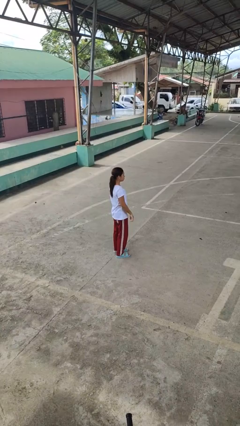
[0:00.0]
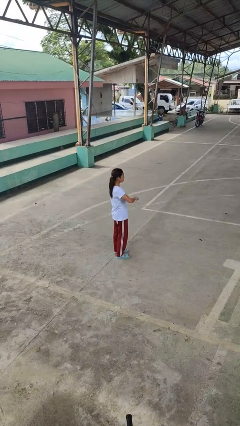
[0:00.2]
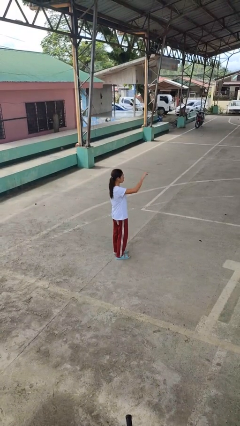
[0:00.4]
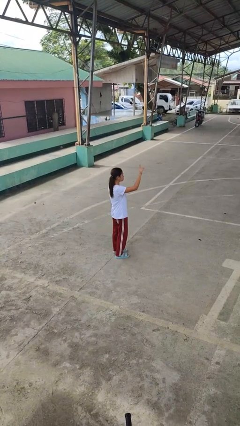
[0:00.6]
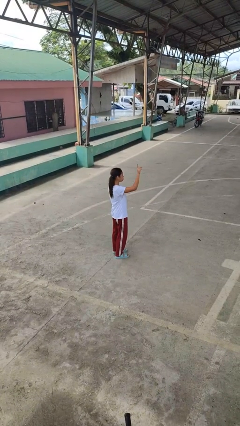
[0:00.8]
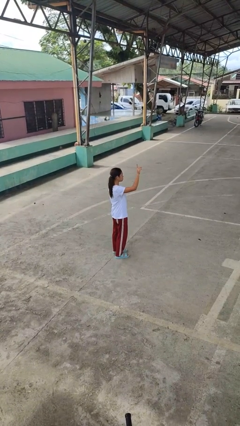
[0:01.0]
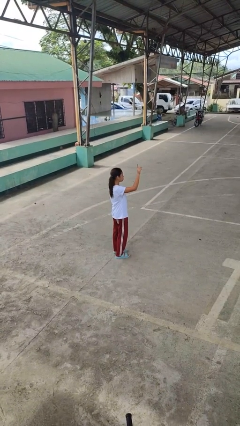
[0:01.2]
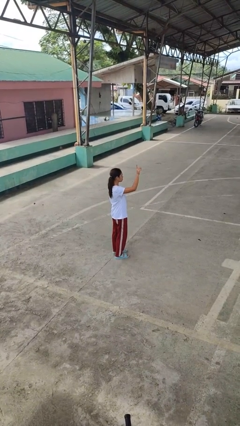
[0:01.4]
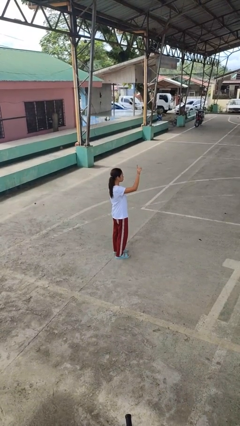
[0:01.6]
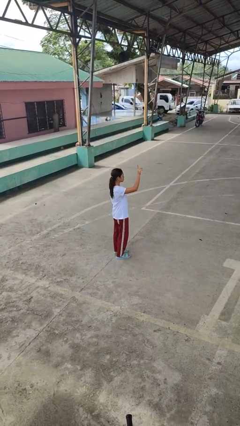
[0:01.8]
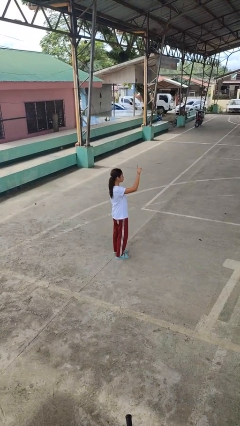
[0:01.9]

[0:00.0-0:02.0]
person gestures swipe up

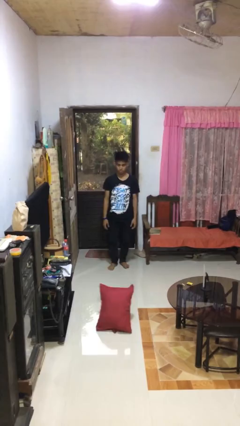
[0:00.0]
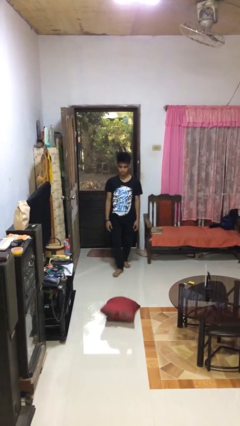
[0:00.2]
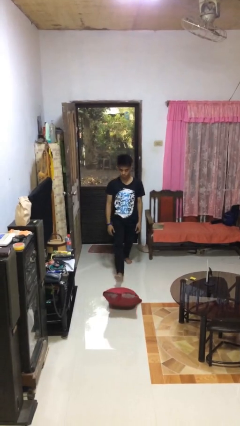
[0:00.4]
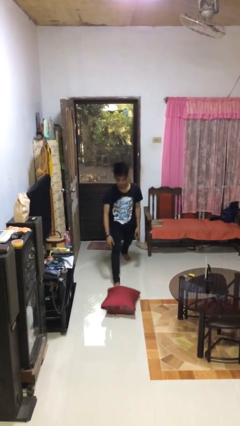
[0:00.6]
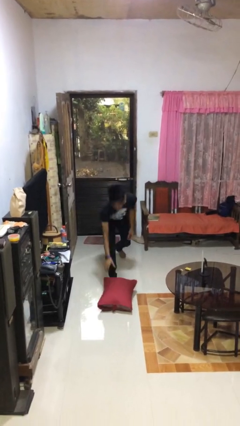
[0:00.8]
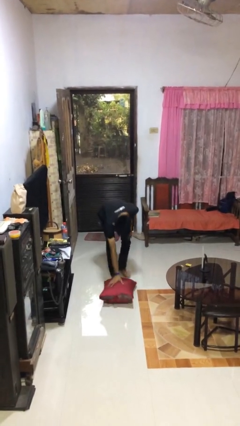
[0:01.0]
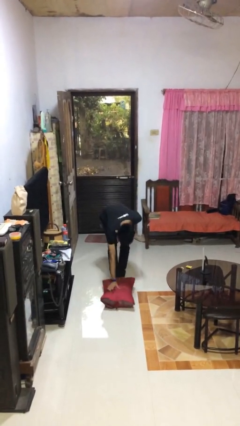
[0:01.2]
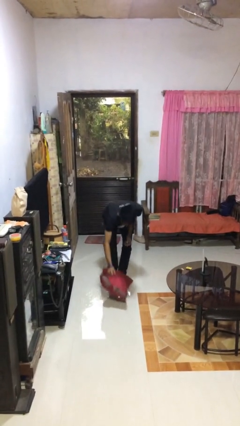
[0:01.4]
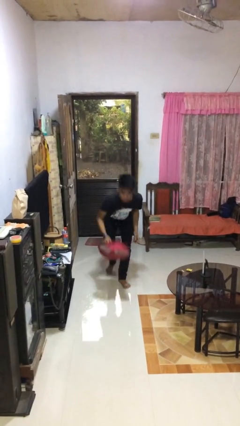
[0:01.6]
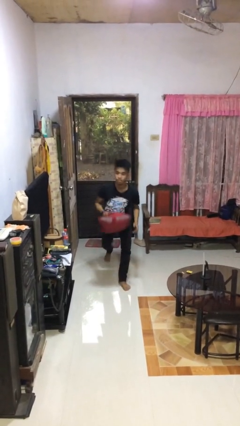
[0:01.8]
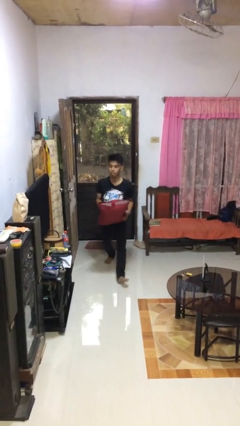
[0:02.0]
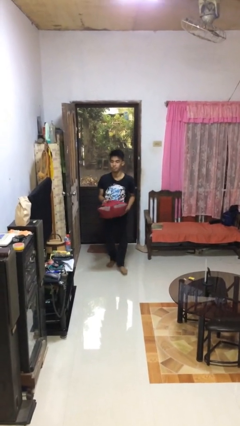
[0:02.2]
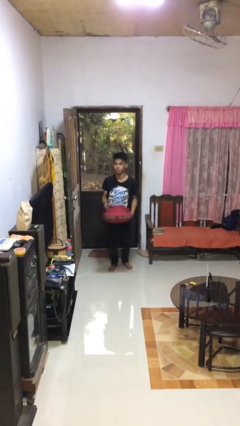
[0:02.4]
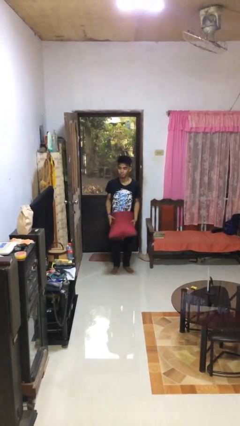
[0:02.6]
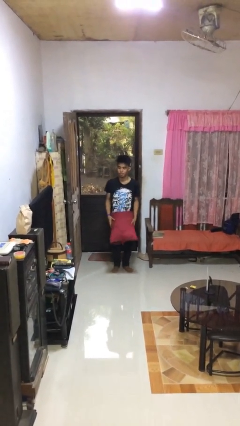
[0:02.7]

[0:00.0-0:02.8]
person picks up object from floor

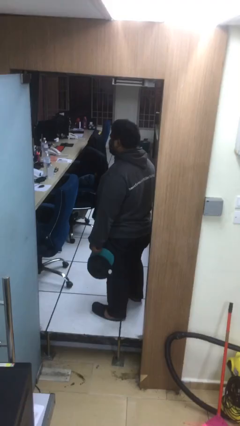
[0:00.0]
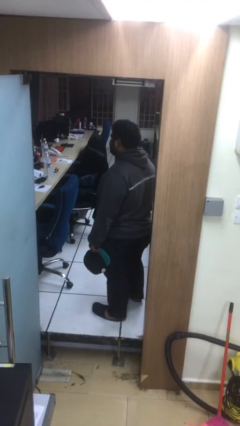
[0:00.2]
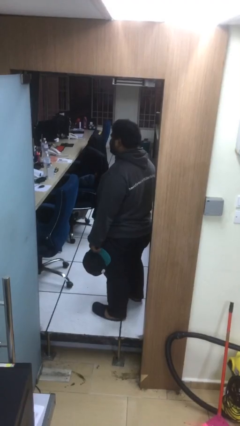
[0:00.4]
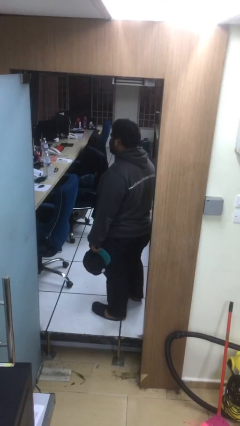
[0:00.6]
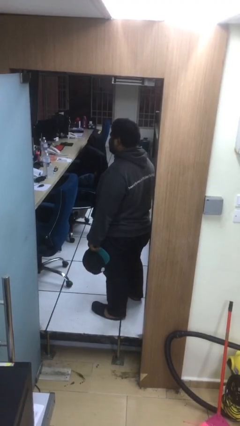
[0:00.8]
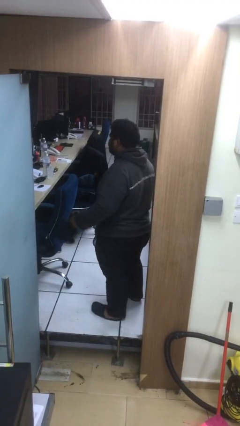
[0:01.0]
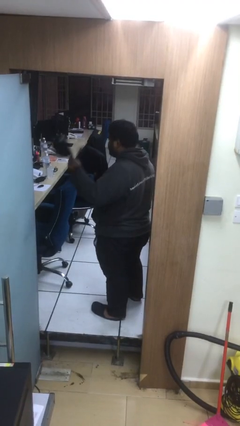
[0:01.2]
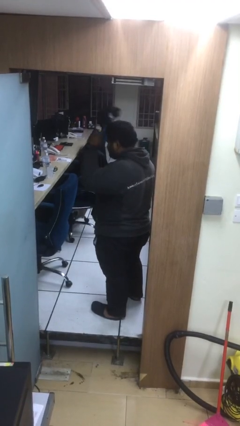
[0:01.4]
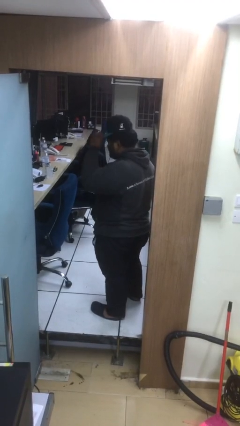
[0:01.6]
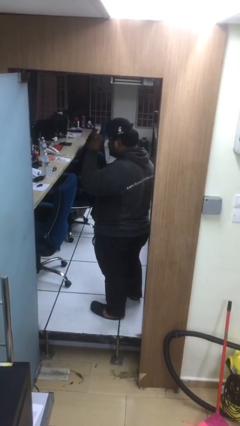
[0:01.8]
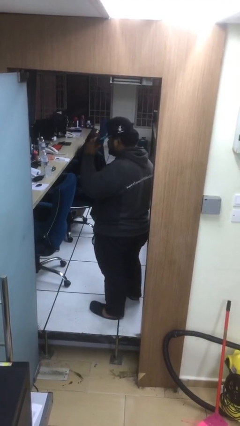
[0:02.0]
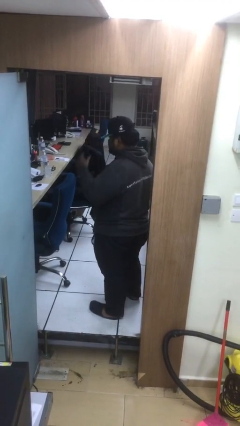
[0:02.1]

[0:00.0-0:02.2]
person puts on hat

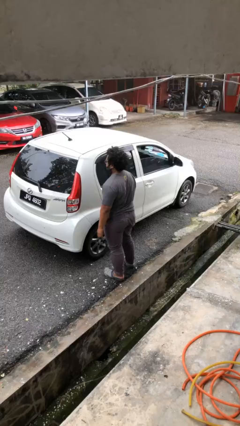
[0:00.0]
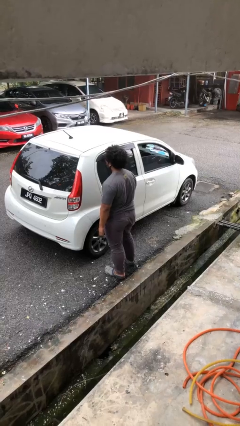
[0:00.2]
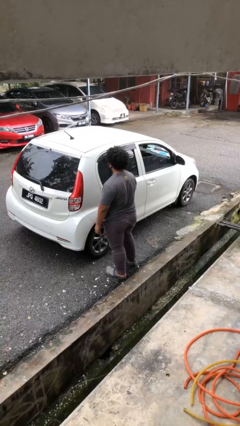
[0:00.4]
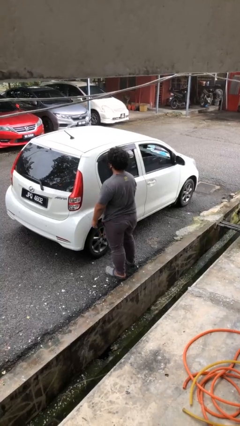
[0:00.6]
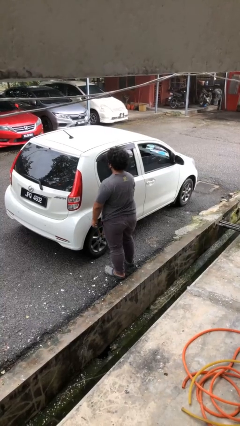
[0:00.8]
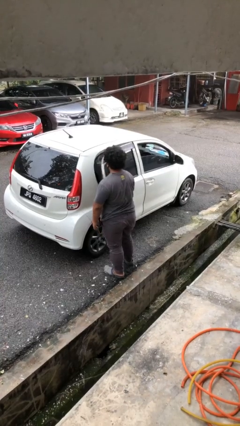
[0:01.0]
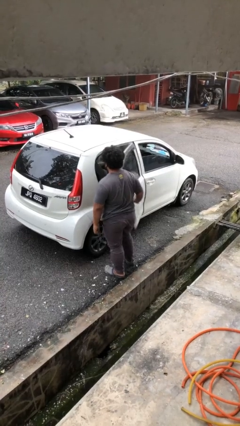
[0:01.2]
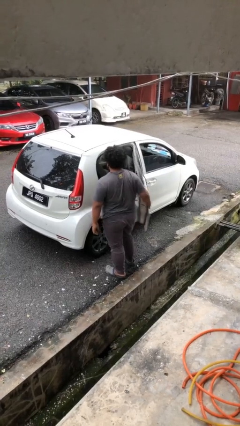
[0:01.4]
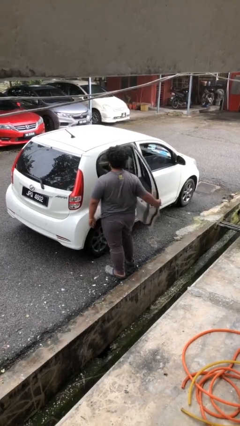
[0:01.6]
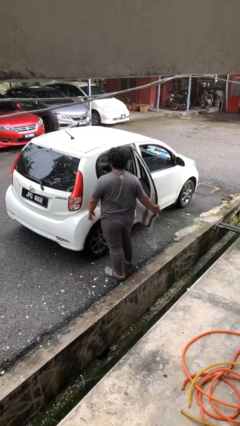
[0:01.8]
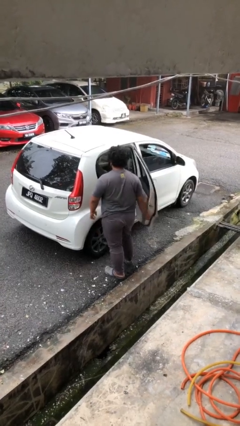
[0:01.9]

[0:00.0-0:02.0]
person opens car door

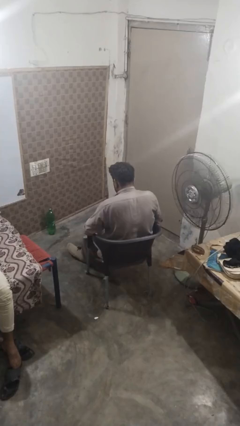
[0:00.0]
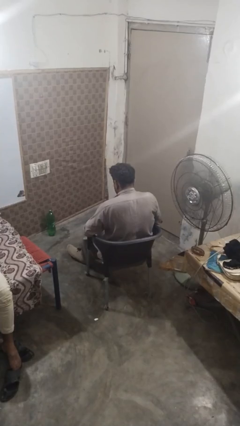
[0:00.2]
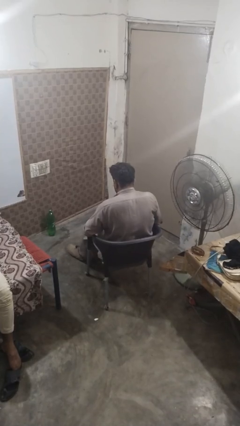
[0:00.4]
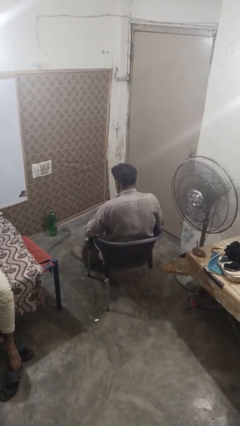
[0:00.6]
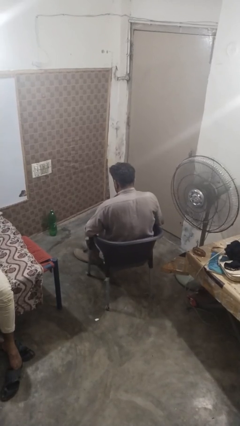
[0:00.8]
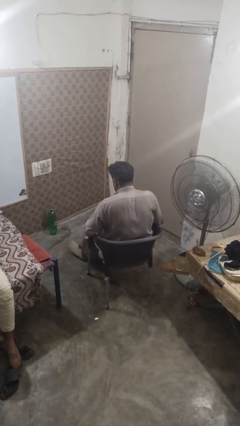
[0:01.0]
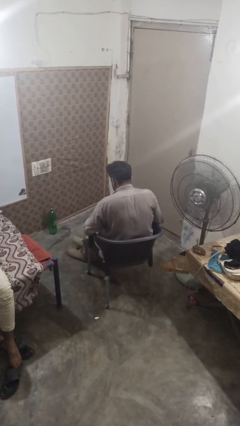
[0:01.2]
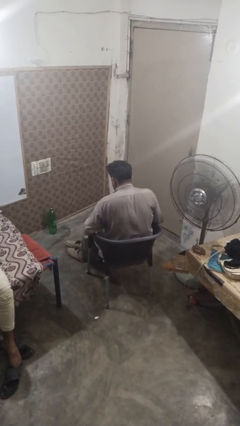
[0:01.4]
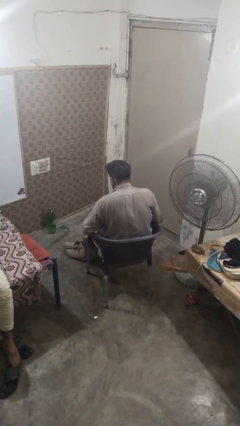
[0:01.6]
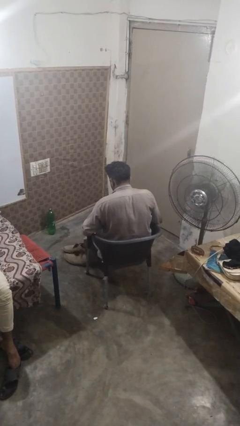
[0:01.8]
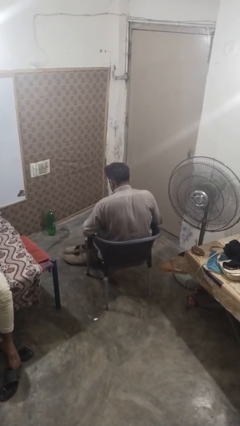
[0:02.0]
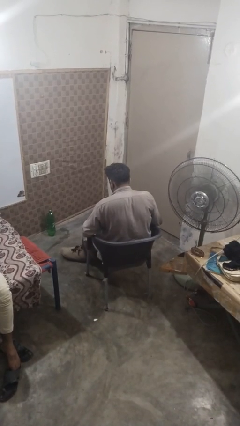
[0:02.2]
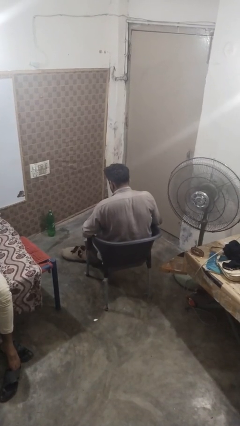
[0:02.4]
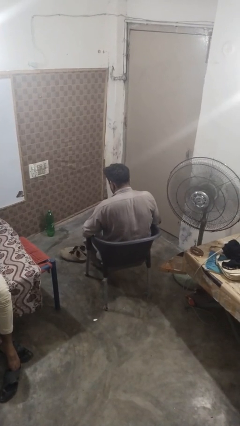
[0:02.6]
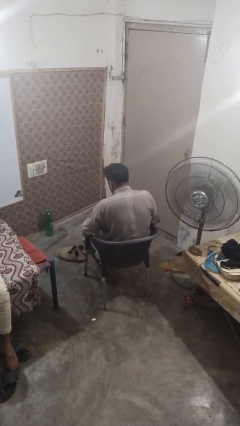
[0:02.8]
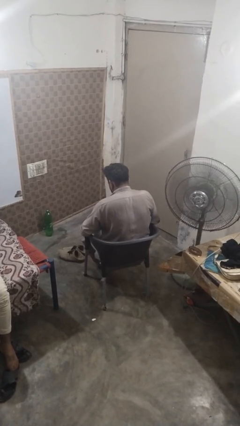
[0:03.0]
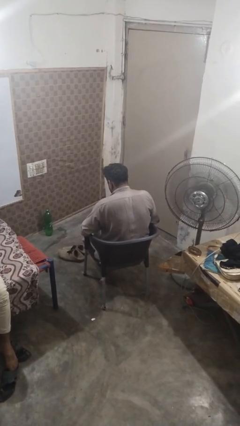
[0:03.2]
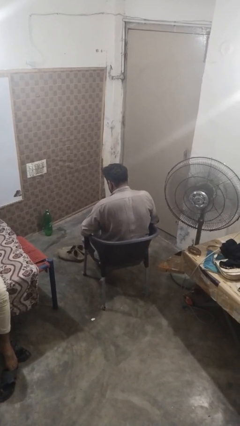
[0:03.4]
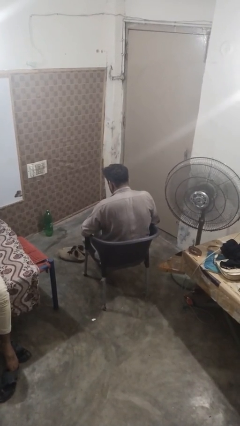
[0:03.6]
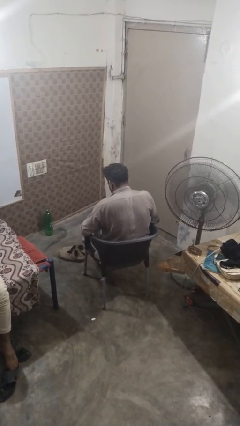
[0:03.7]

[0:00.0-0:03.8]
person takes off shoes

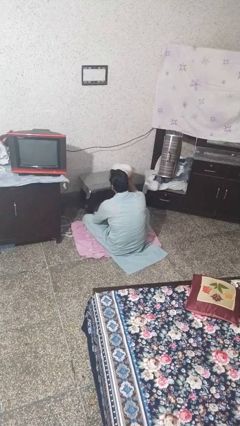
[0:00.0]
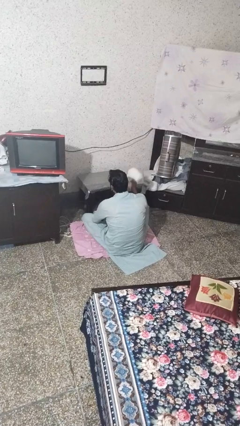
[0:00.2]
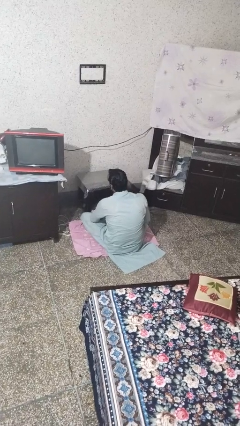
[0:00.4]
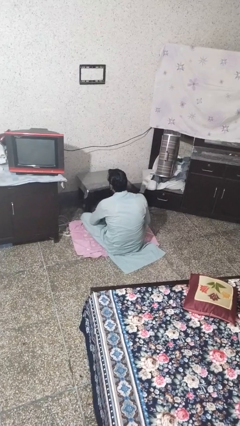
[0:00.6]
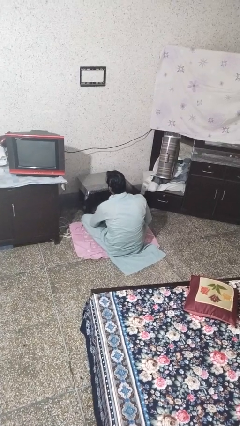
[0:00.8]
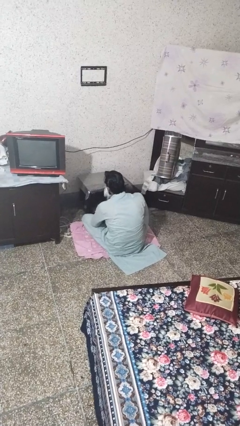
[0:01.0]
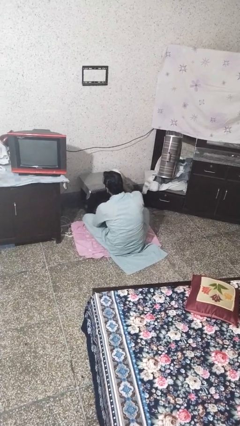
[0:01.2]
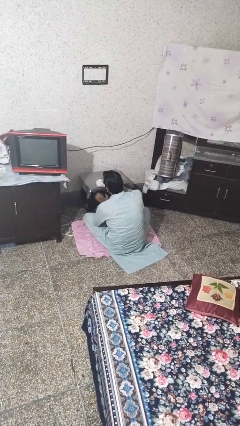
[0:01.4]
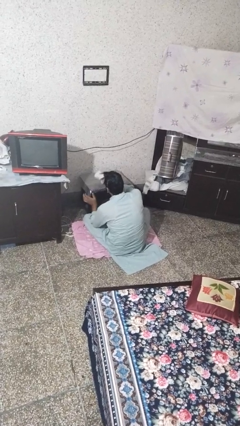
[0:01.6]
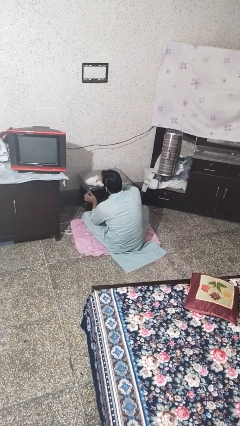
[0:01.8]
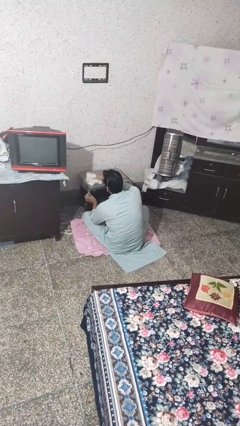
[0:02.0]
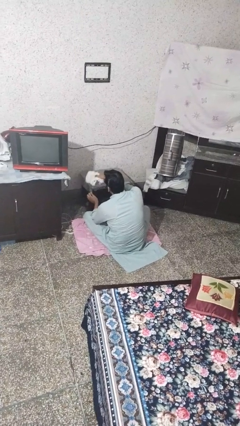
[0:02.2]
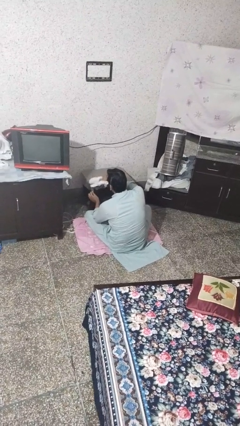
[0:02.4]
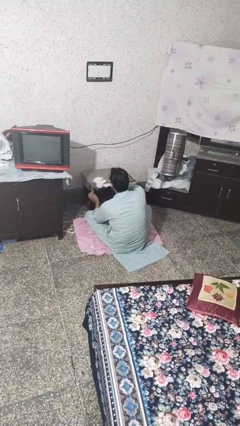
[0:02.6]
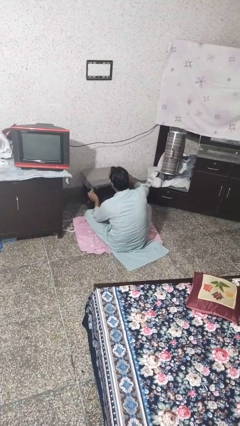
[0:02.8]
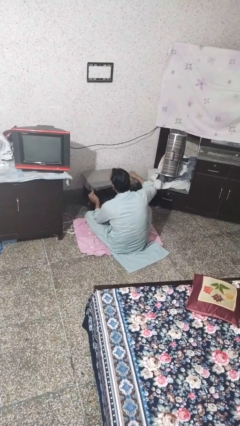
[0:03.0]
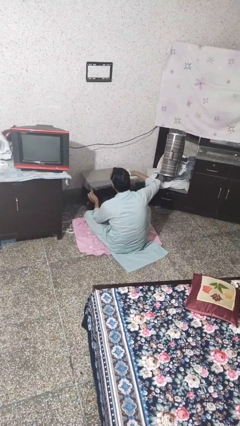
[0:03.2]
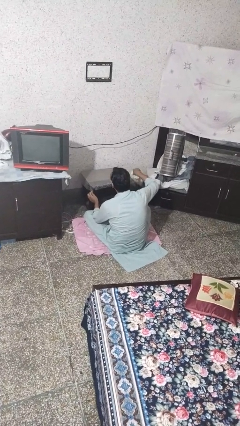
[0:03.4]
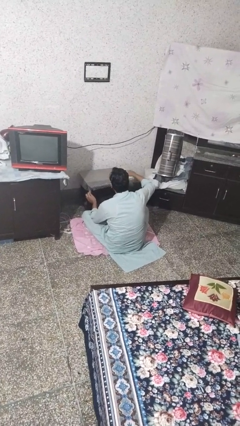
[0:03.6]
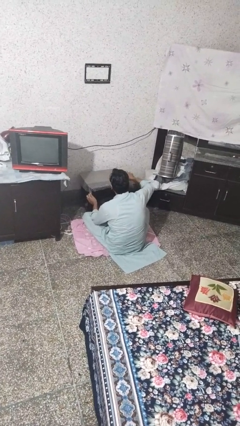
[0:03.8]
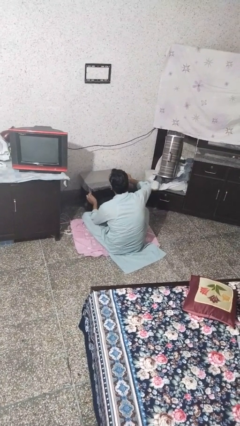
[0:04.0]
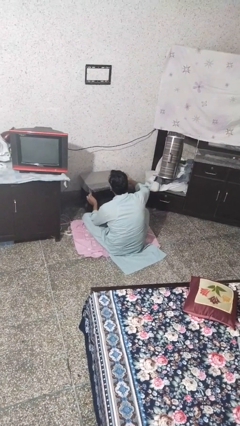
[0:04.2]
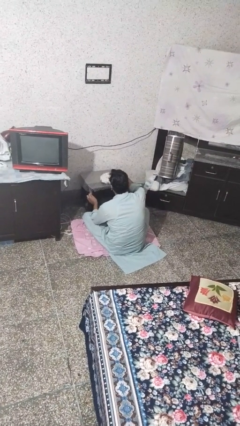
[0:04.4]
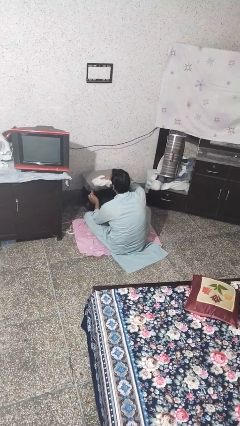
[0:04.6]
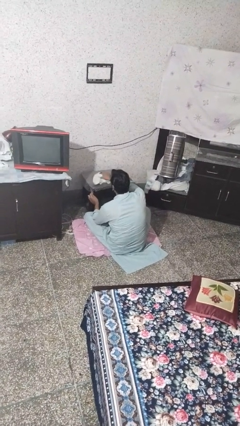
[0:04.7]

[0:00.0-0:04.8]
person cleans table with rag
